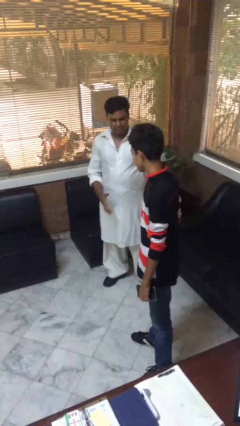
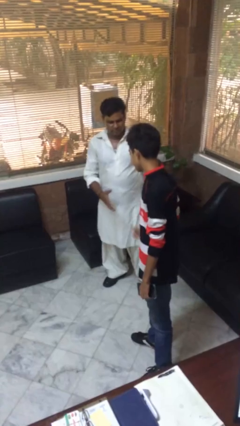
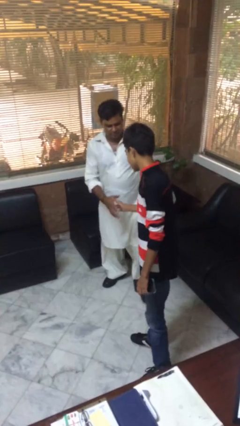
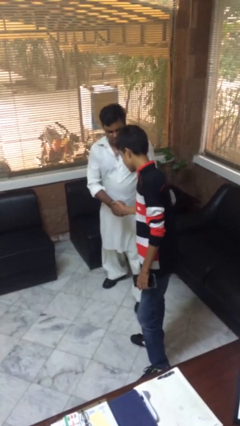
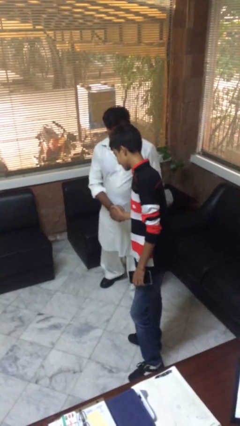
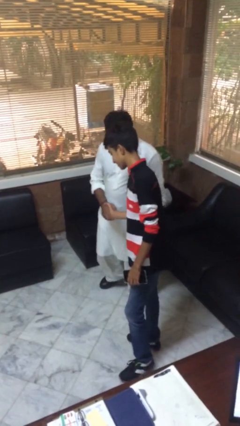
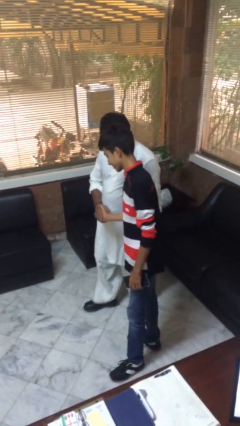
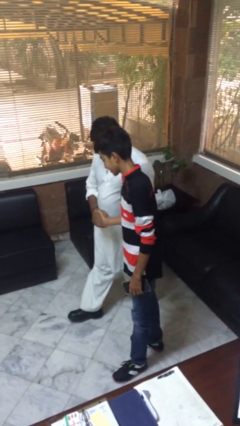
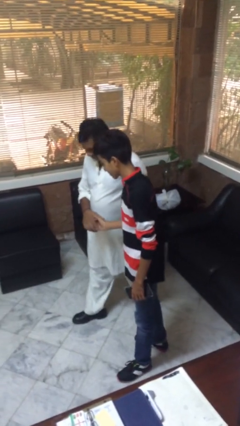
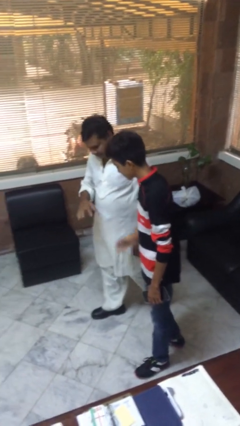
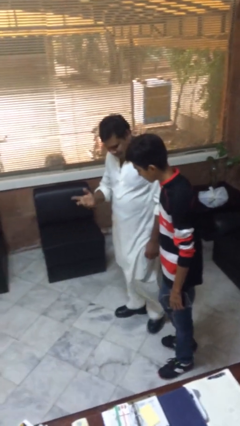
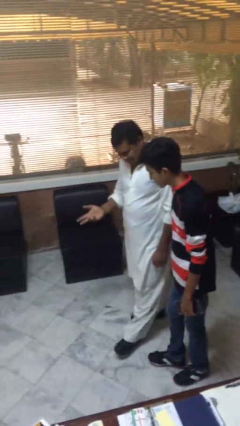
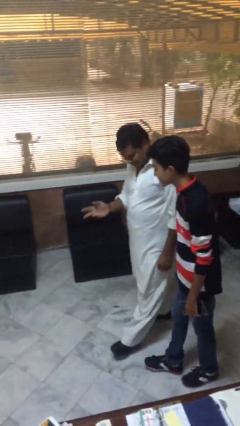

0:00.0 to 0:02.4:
person shakes hand

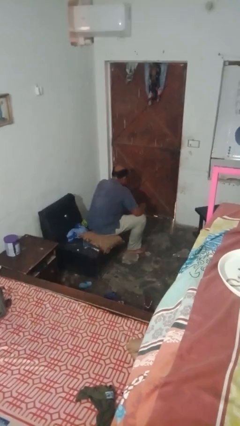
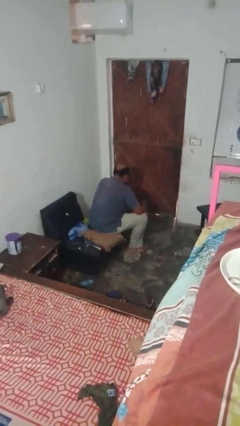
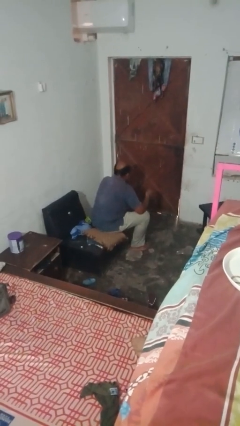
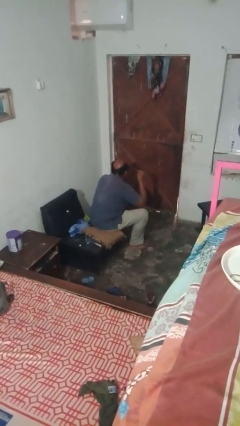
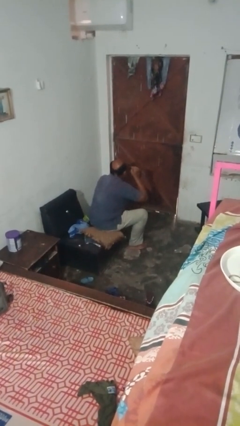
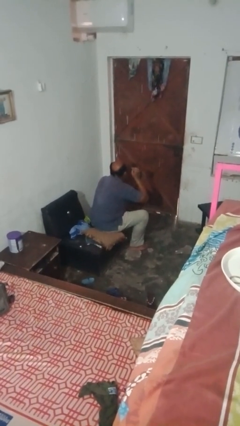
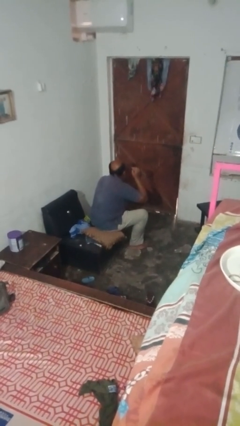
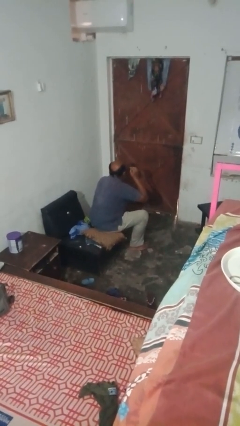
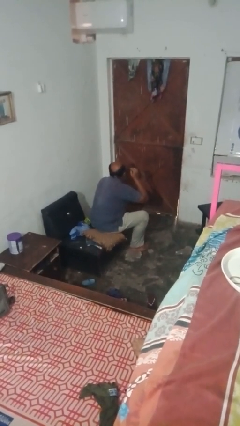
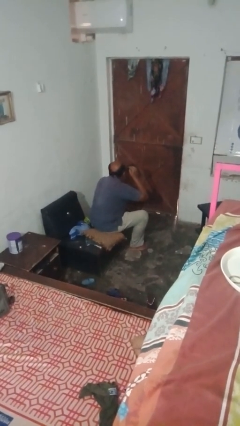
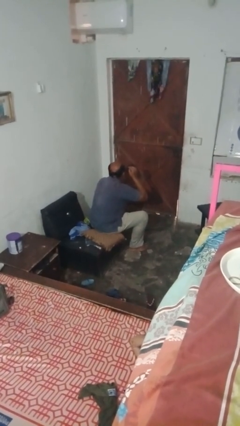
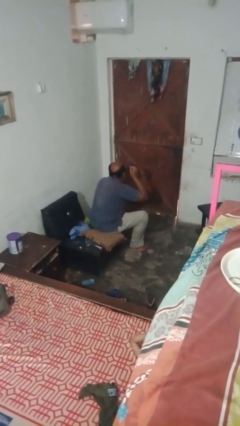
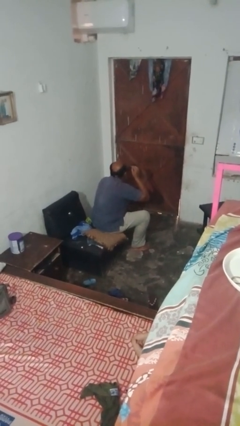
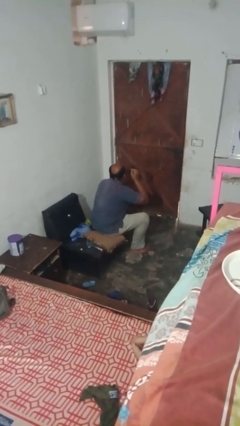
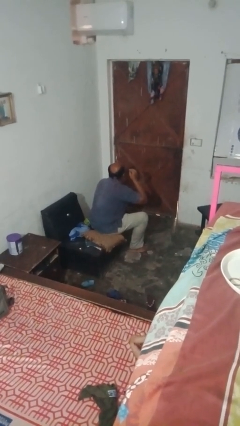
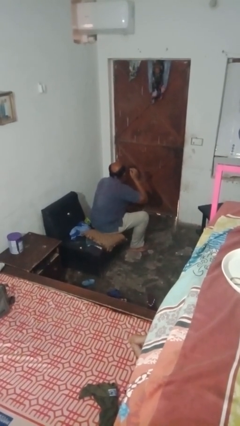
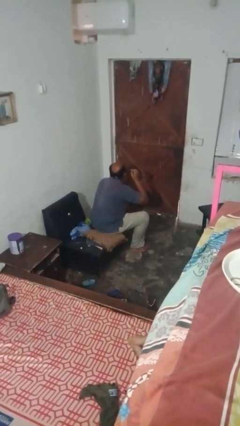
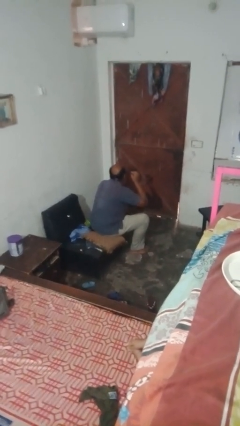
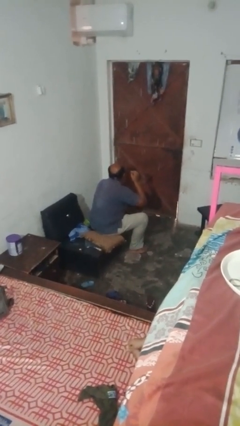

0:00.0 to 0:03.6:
person applies eye makeup

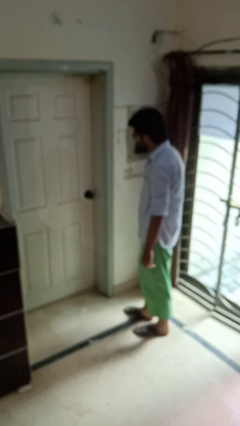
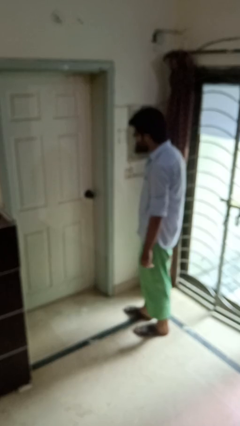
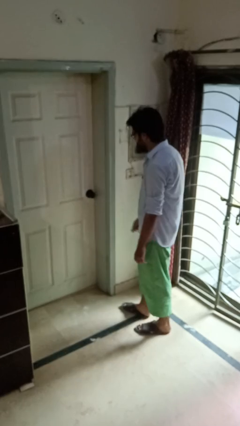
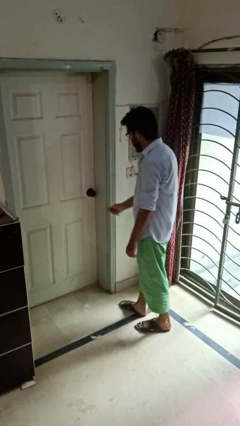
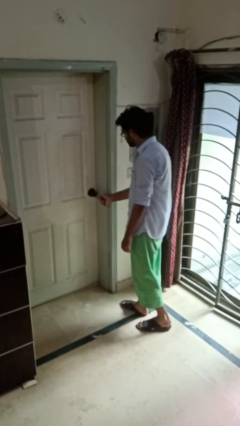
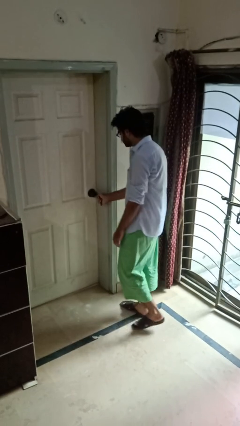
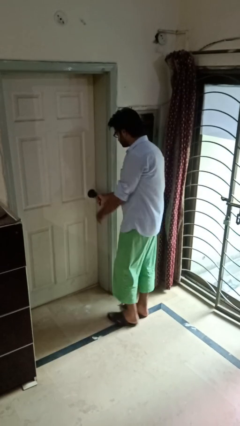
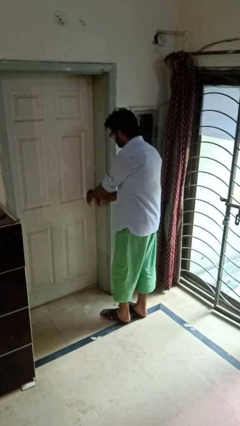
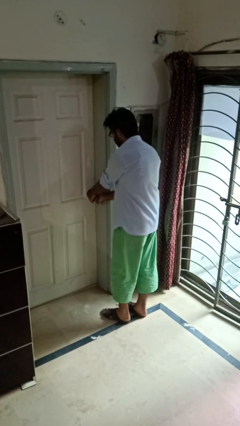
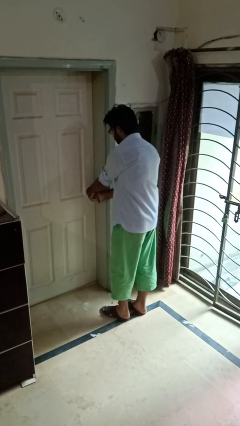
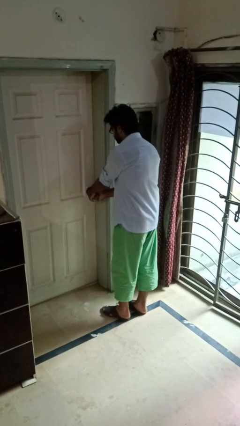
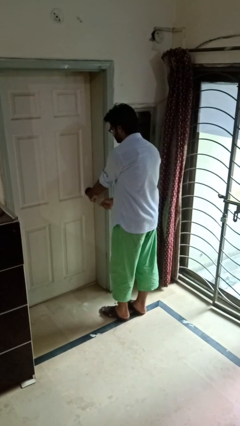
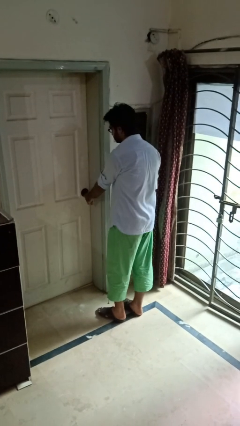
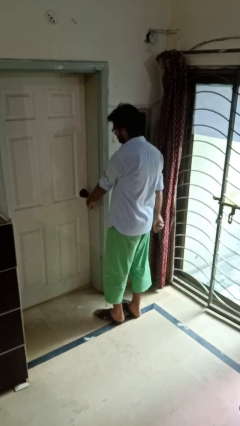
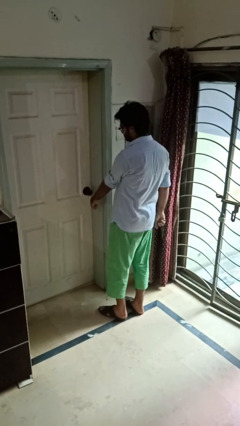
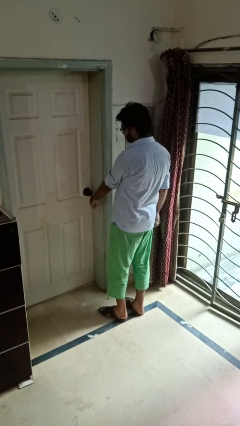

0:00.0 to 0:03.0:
person unlocks door with keys

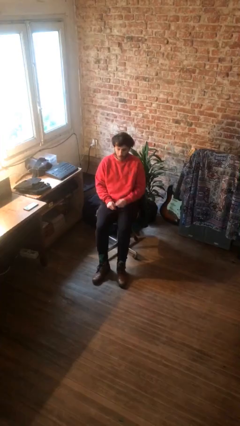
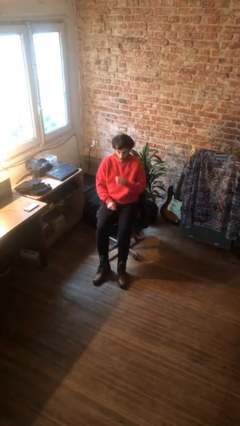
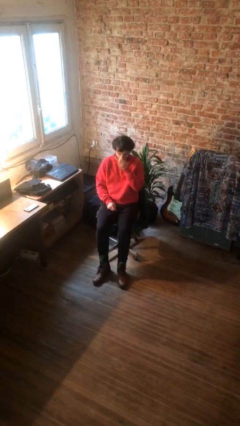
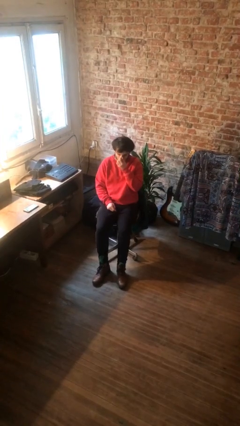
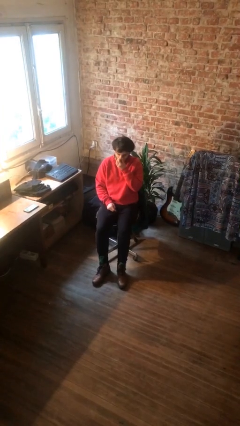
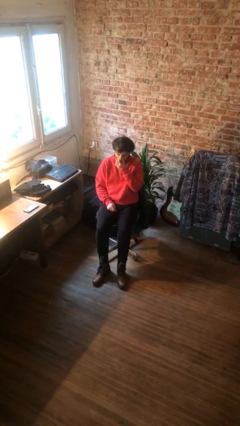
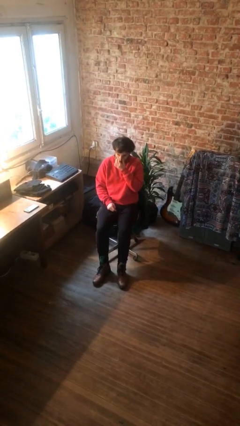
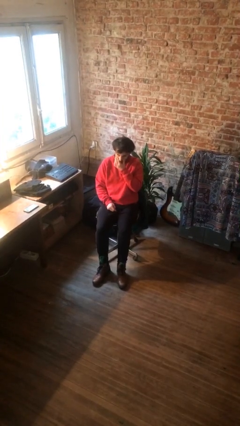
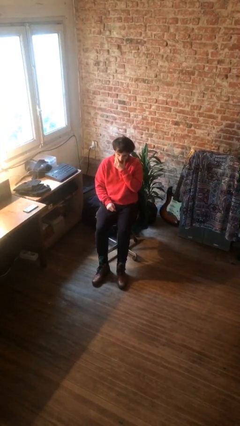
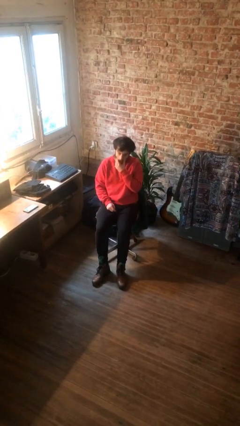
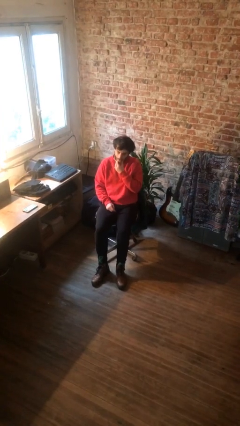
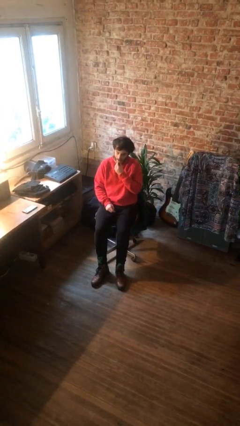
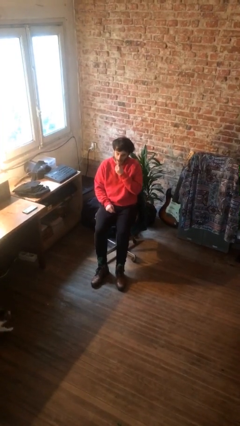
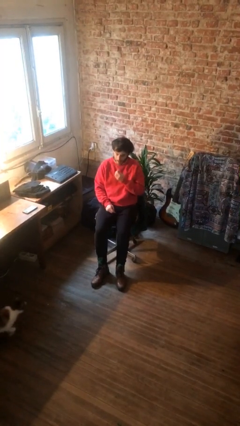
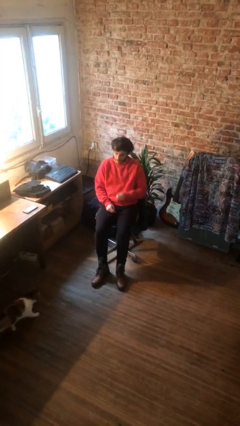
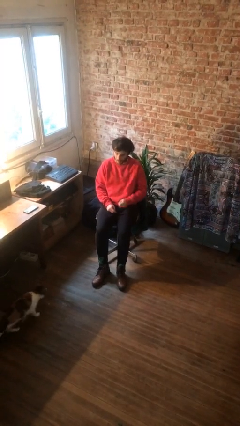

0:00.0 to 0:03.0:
person scratches face

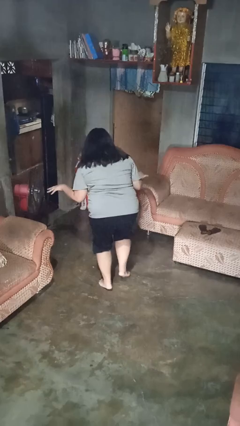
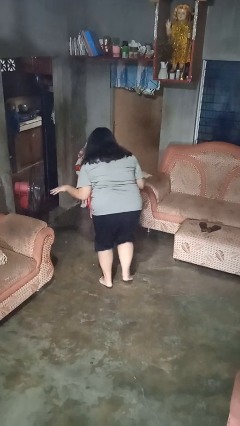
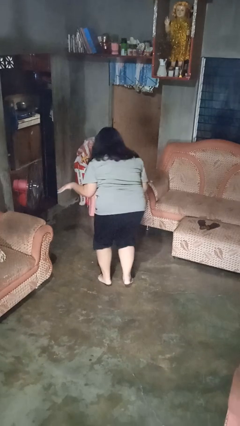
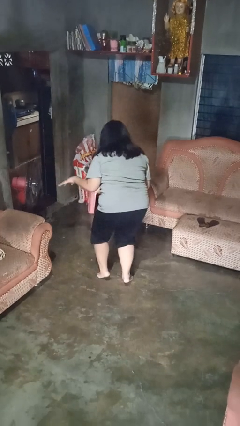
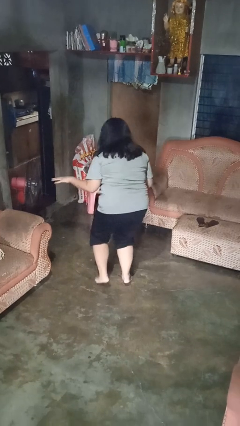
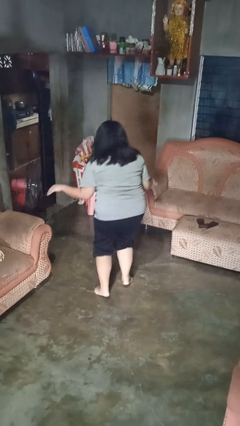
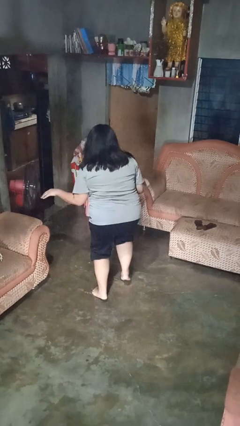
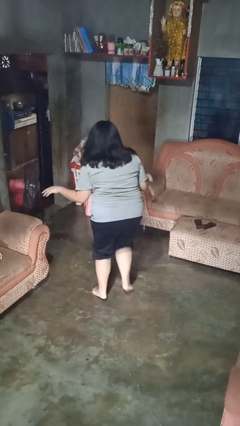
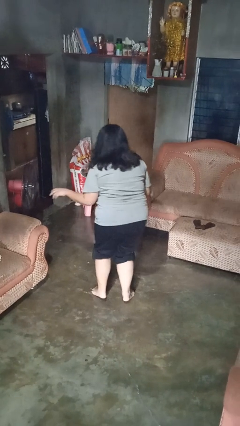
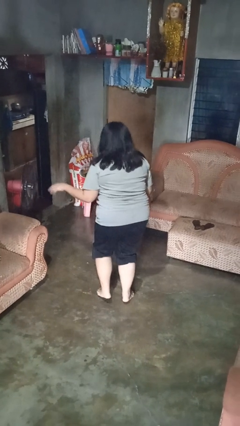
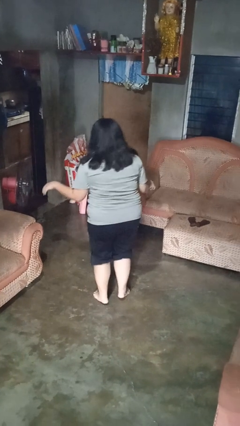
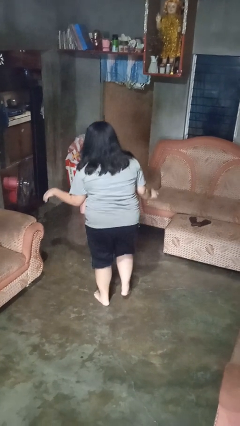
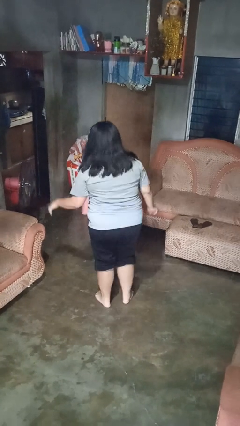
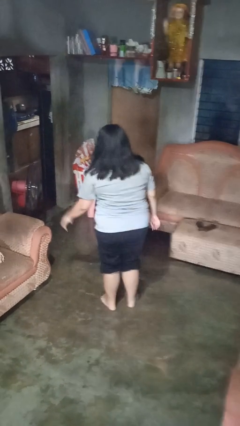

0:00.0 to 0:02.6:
person walks tiptoe

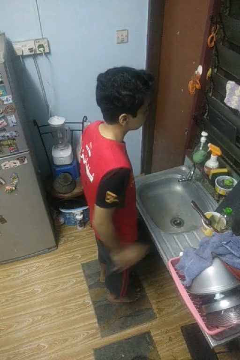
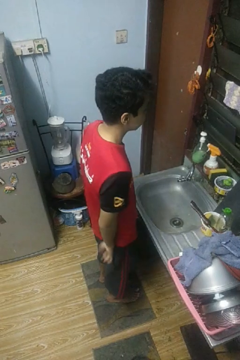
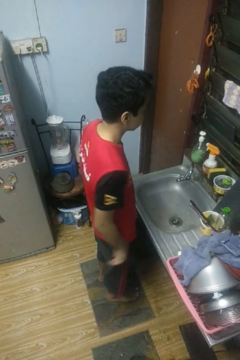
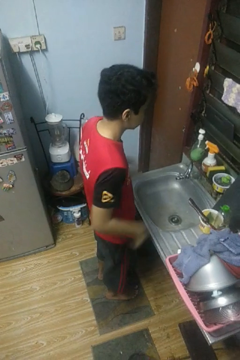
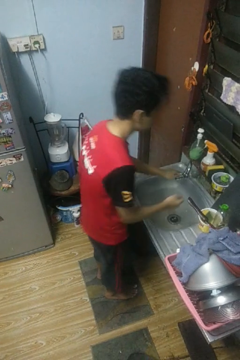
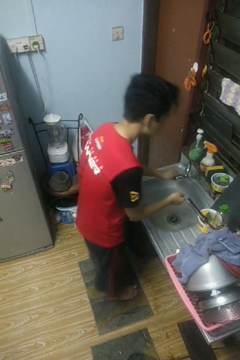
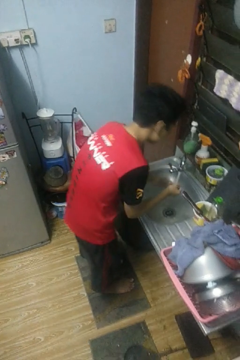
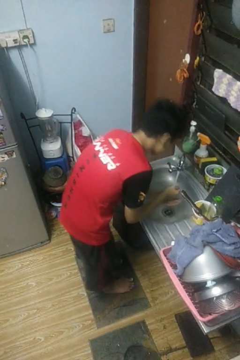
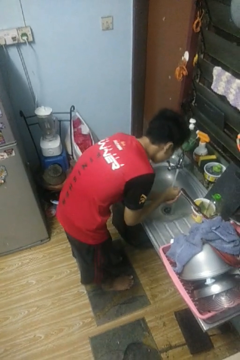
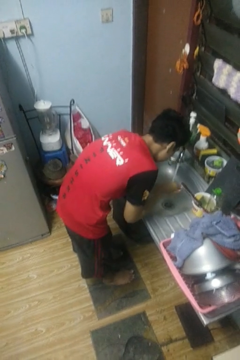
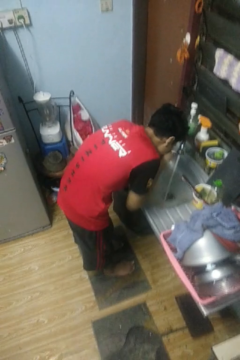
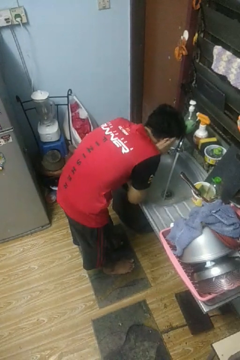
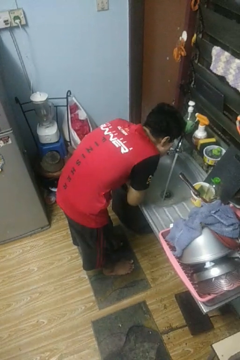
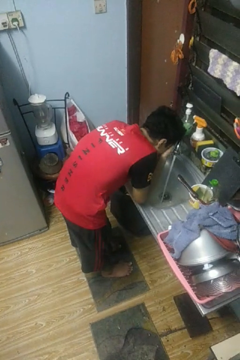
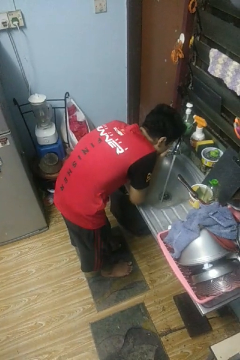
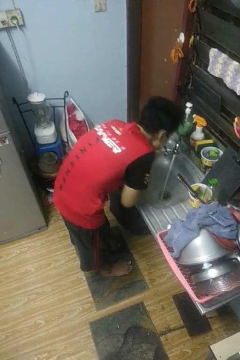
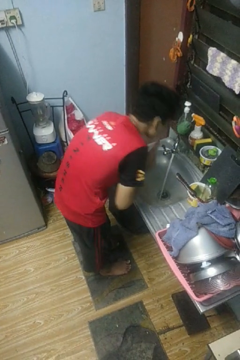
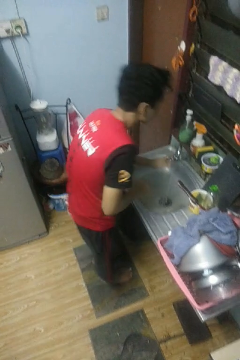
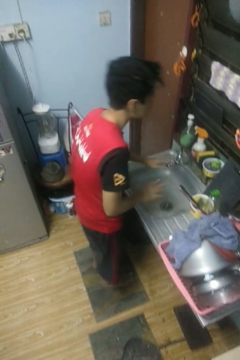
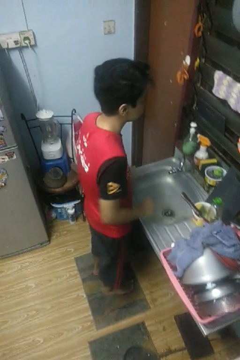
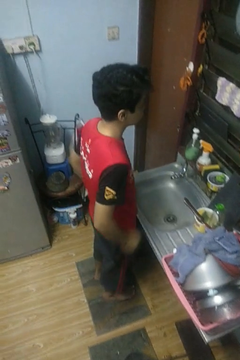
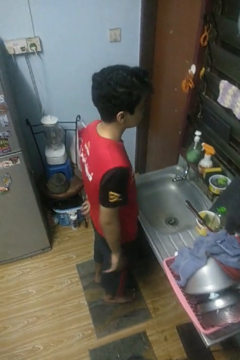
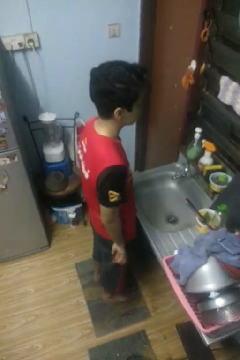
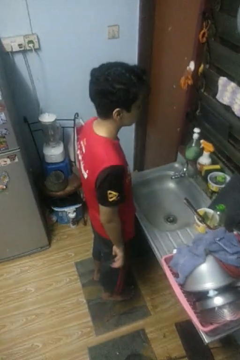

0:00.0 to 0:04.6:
person washes face
